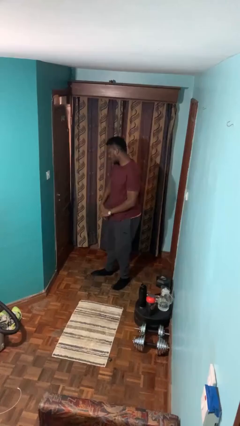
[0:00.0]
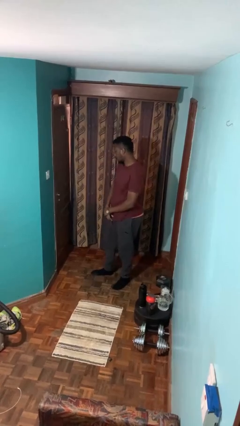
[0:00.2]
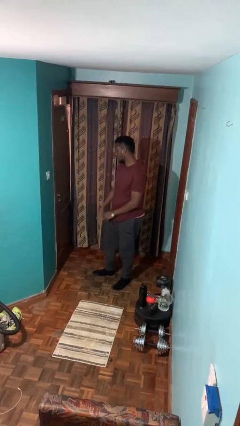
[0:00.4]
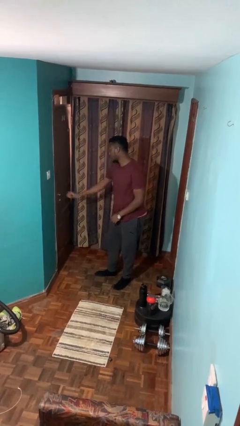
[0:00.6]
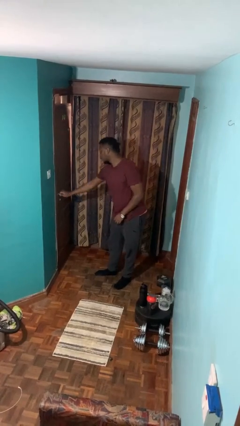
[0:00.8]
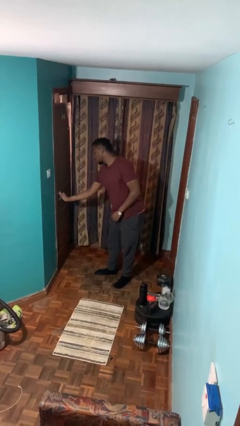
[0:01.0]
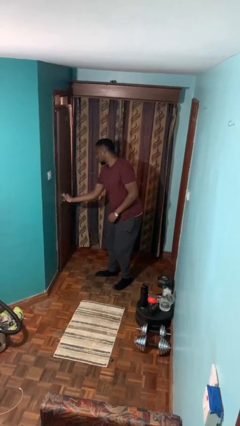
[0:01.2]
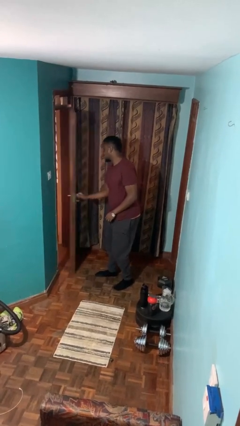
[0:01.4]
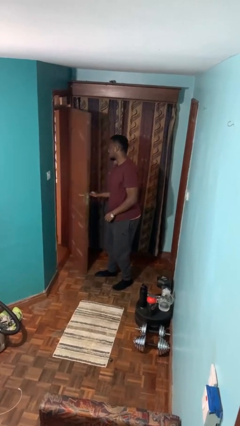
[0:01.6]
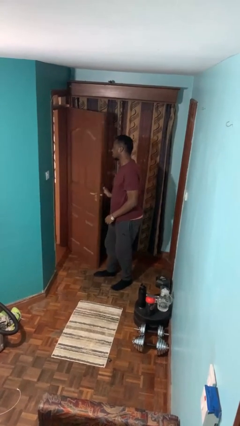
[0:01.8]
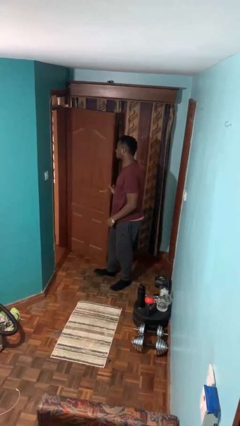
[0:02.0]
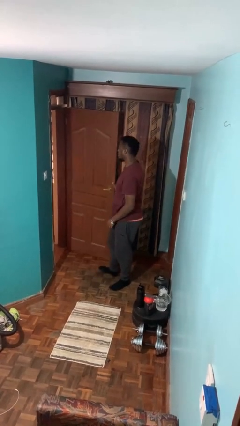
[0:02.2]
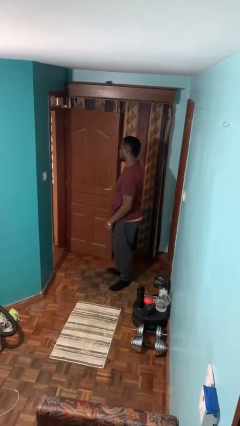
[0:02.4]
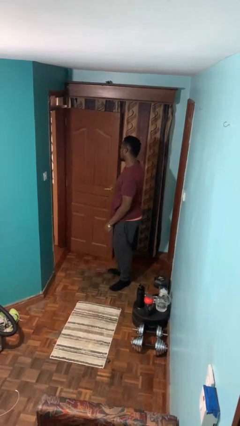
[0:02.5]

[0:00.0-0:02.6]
person opens facility door

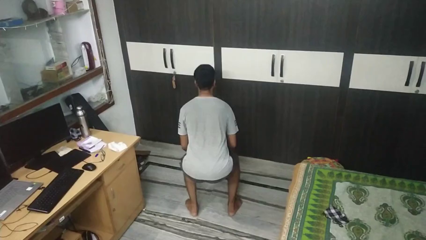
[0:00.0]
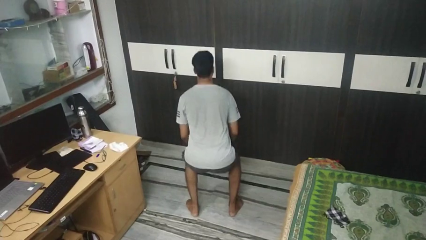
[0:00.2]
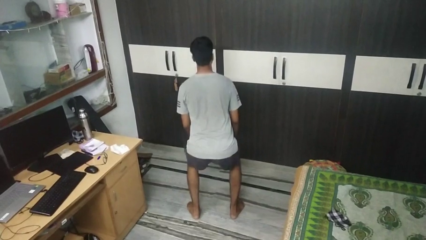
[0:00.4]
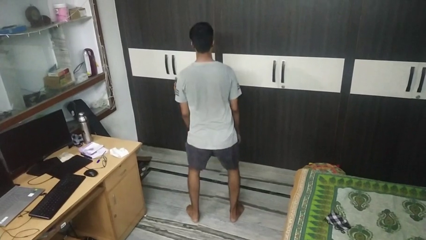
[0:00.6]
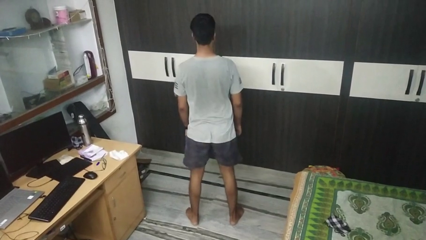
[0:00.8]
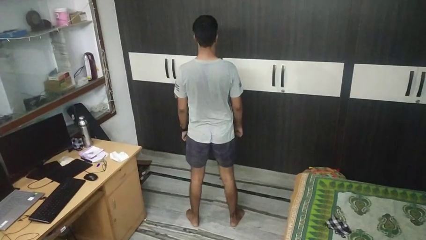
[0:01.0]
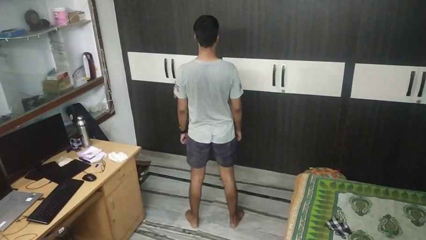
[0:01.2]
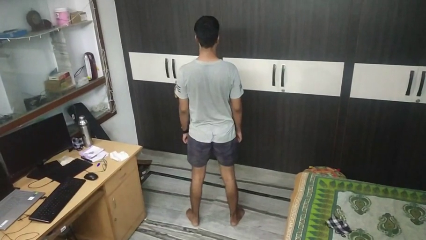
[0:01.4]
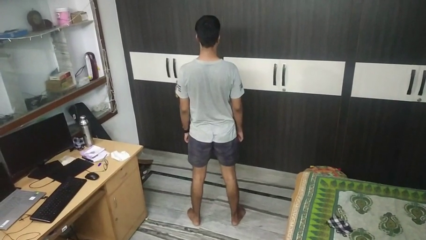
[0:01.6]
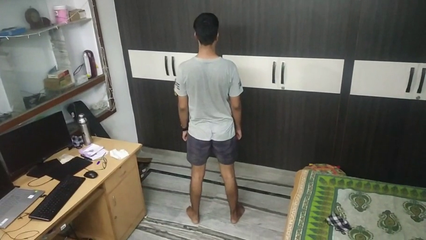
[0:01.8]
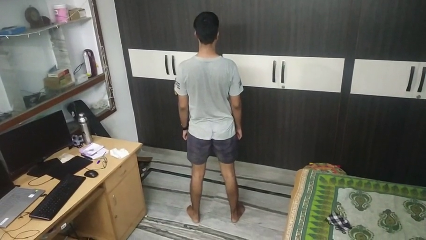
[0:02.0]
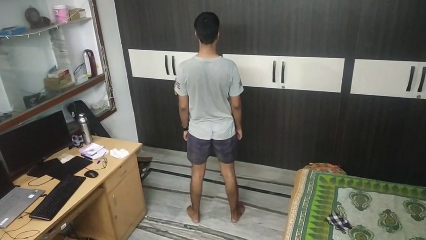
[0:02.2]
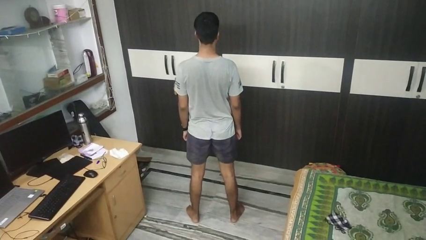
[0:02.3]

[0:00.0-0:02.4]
person stands up

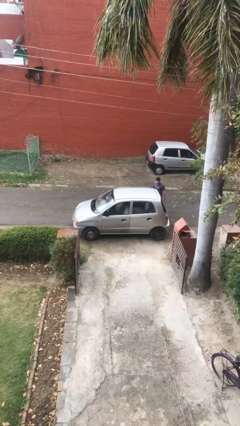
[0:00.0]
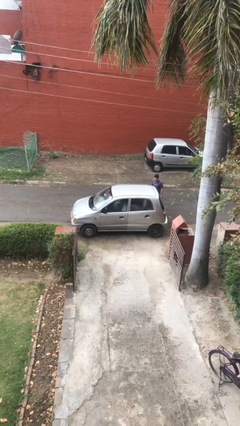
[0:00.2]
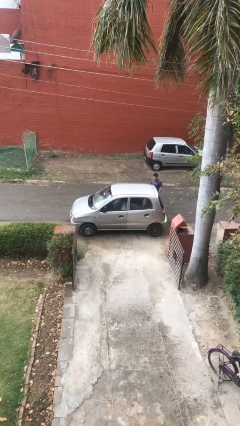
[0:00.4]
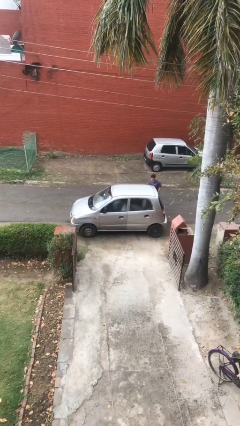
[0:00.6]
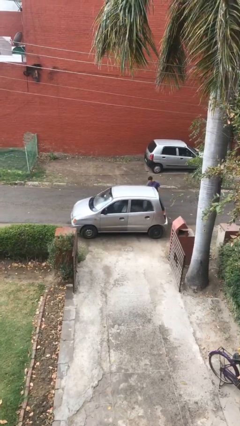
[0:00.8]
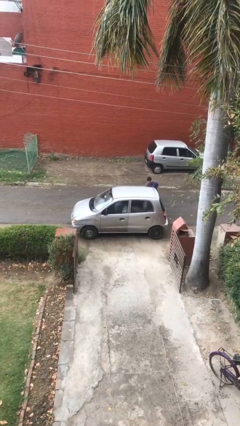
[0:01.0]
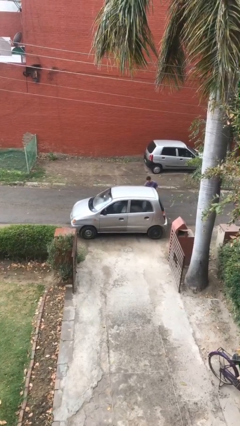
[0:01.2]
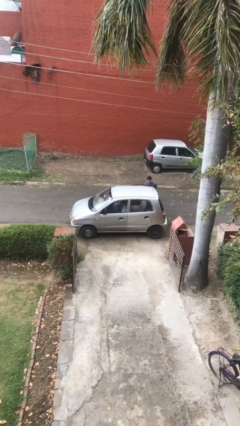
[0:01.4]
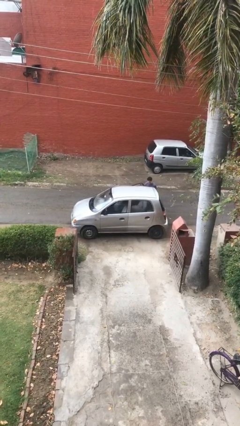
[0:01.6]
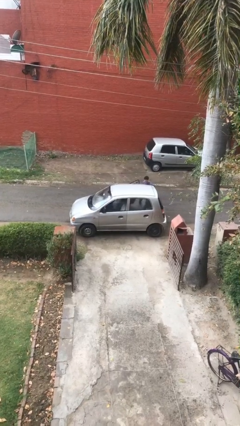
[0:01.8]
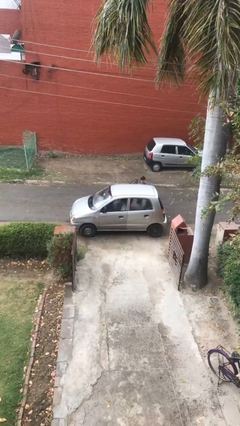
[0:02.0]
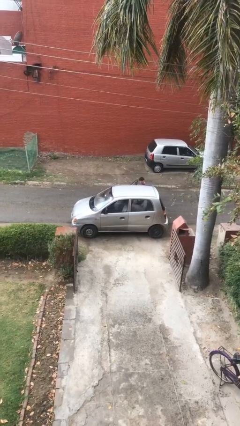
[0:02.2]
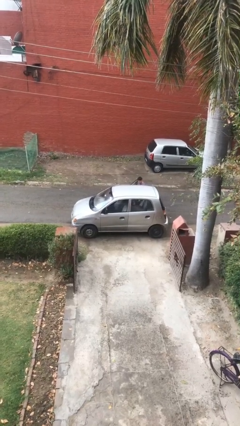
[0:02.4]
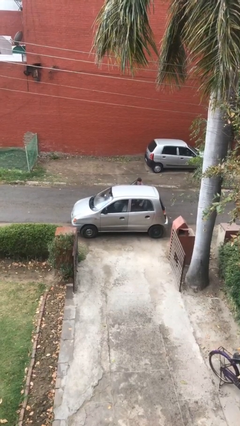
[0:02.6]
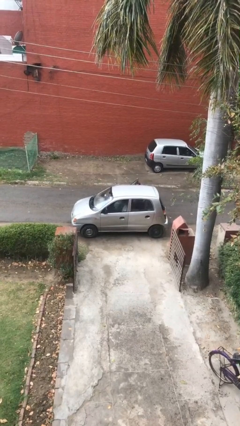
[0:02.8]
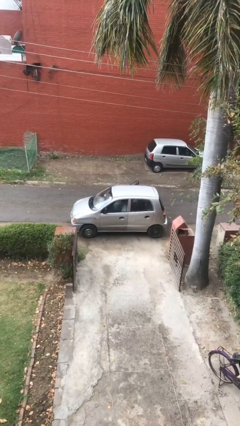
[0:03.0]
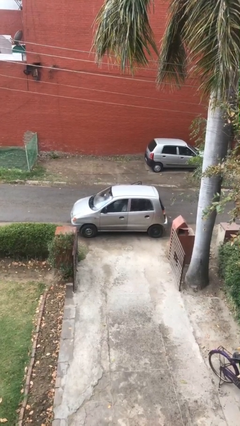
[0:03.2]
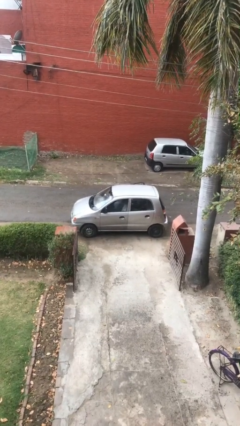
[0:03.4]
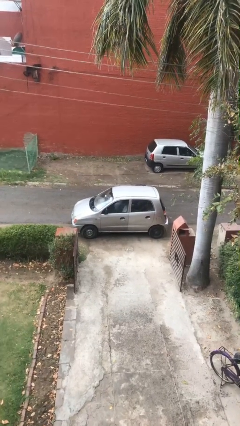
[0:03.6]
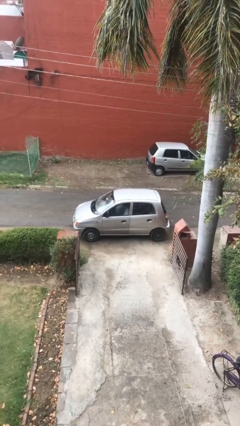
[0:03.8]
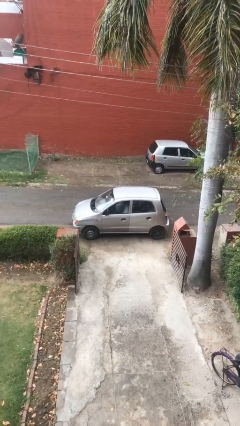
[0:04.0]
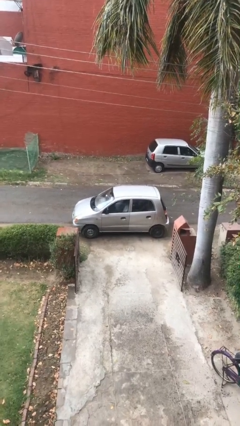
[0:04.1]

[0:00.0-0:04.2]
car picks up person

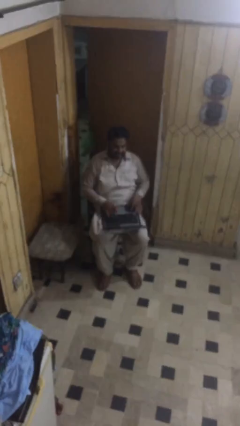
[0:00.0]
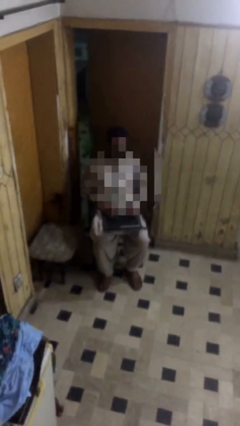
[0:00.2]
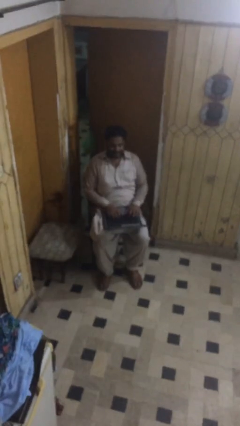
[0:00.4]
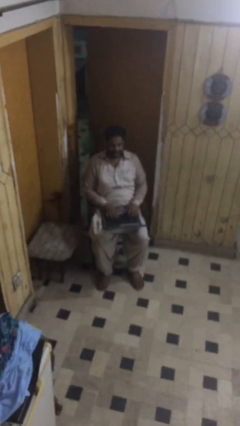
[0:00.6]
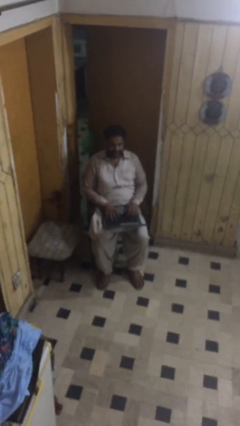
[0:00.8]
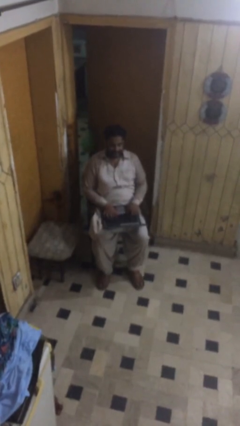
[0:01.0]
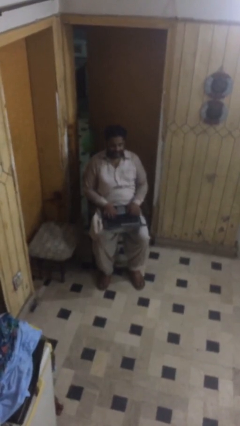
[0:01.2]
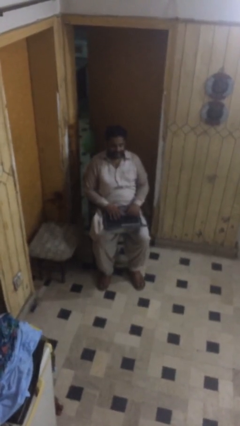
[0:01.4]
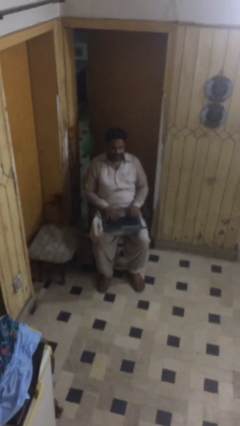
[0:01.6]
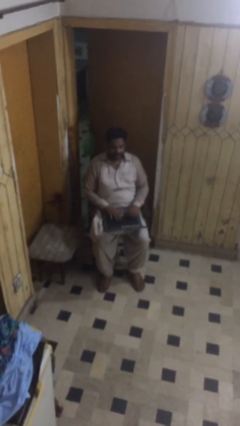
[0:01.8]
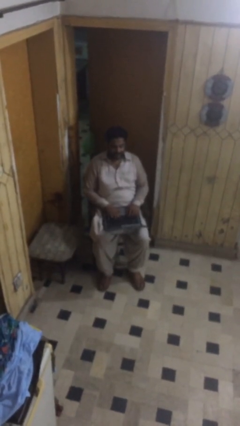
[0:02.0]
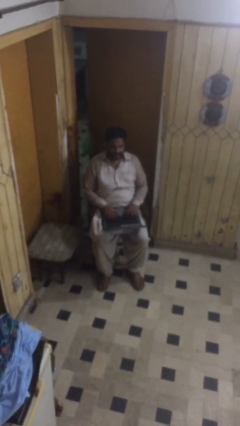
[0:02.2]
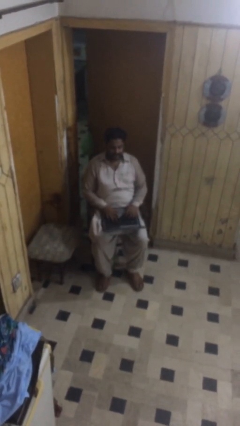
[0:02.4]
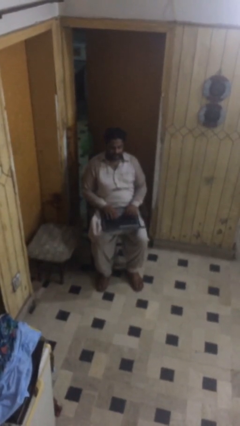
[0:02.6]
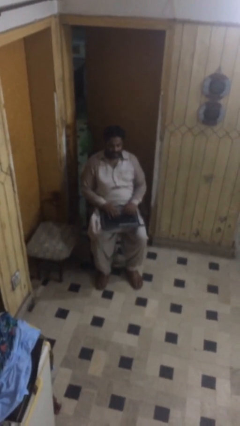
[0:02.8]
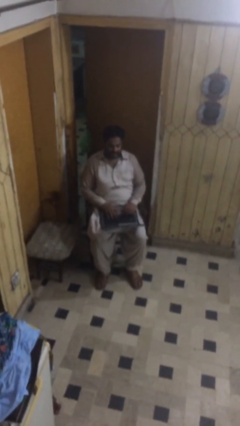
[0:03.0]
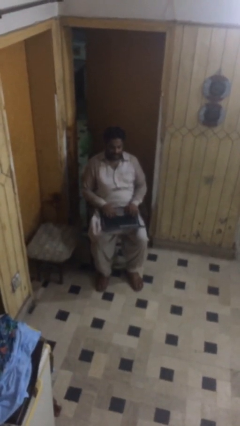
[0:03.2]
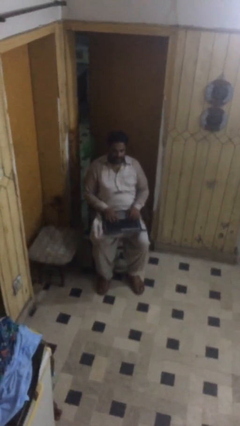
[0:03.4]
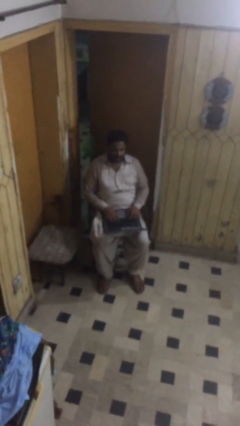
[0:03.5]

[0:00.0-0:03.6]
person interacts with laptop

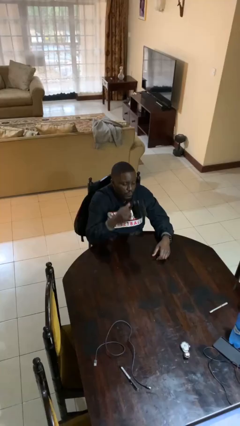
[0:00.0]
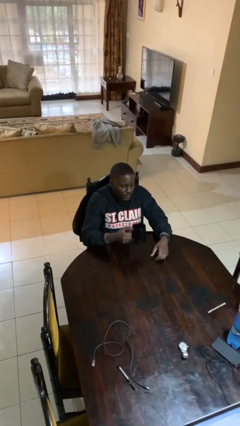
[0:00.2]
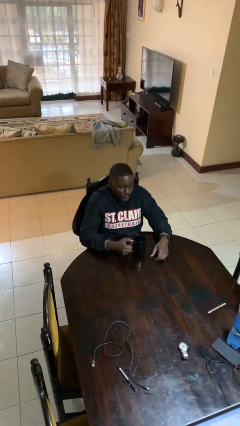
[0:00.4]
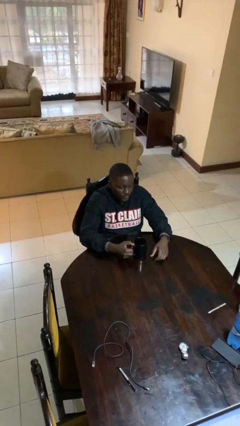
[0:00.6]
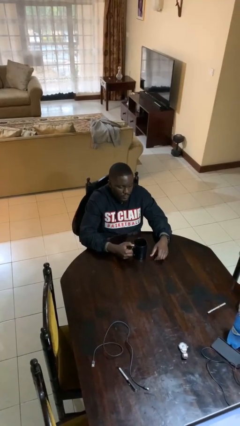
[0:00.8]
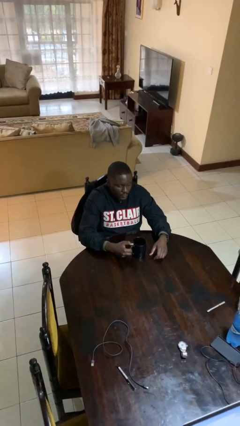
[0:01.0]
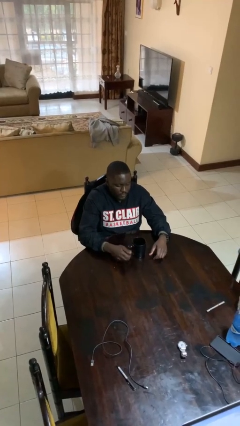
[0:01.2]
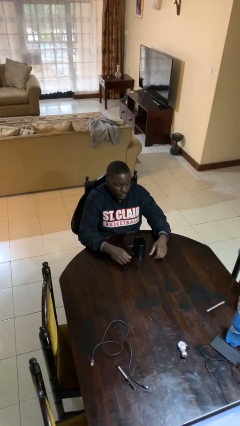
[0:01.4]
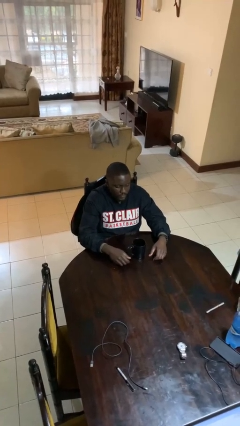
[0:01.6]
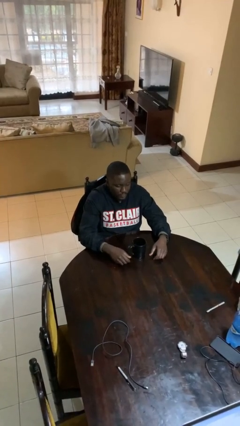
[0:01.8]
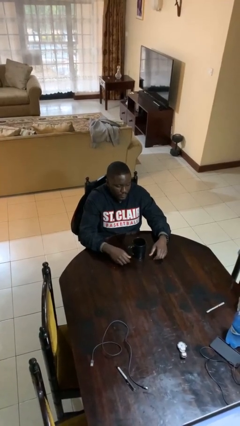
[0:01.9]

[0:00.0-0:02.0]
person puts down object on table

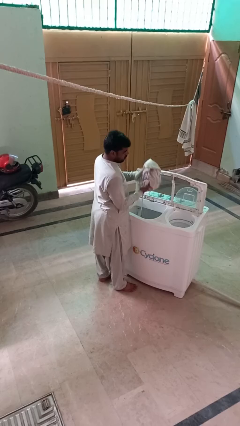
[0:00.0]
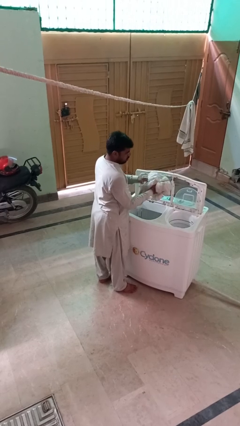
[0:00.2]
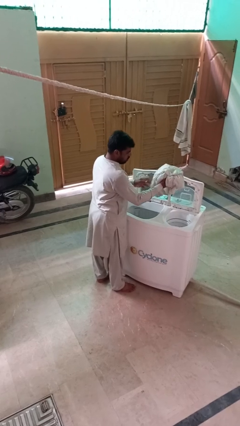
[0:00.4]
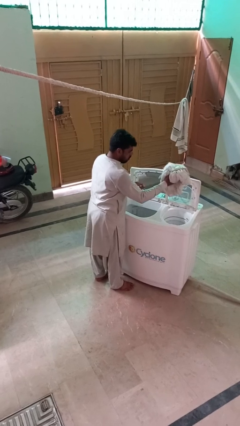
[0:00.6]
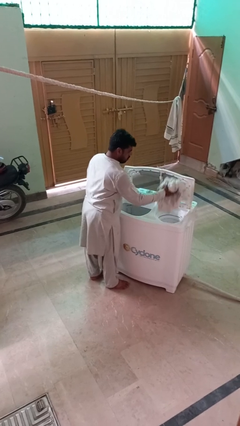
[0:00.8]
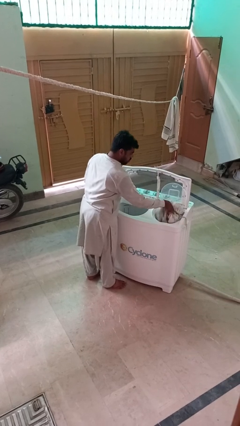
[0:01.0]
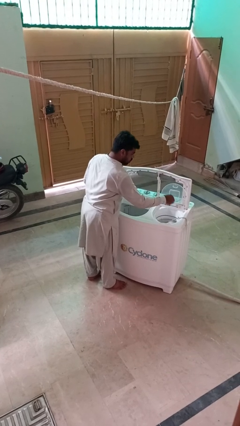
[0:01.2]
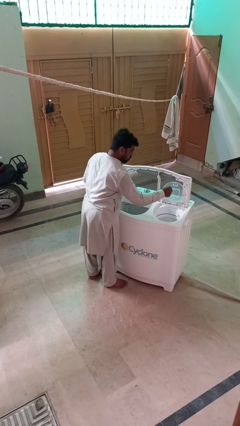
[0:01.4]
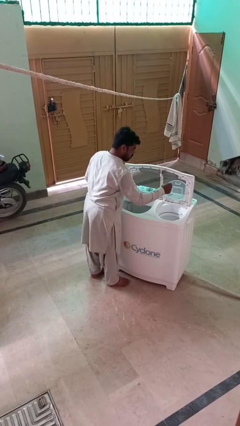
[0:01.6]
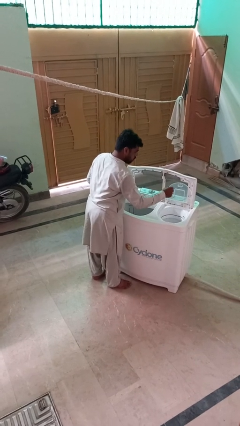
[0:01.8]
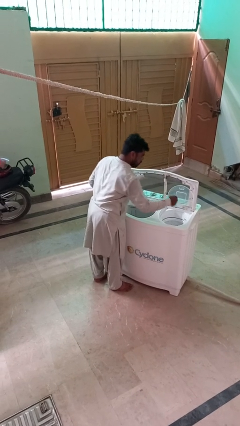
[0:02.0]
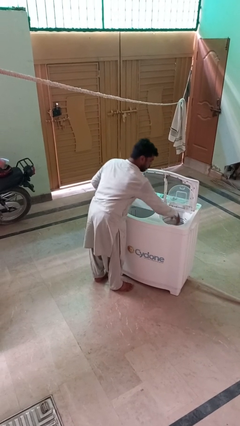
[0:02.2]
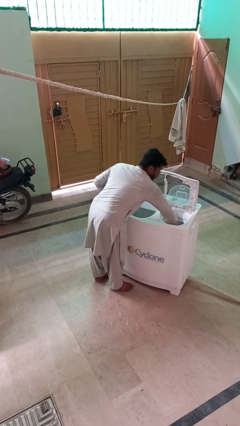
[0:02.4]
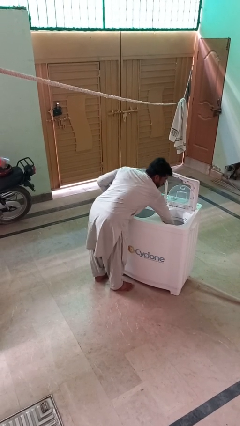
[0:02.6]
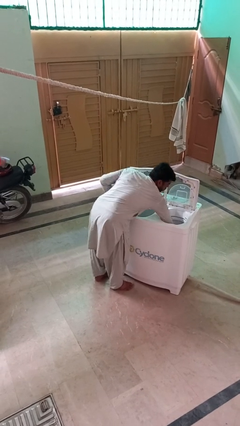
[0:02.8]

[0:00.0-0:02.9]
person loads dryer
